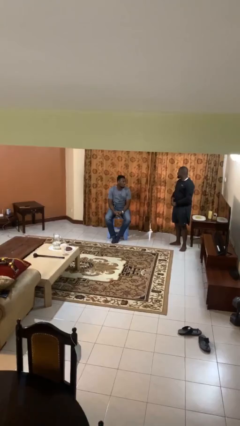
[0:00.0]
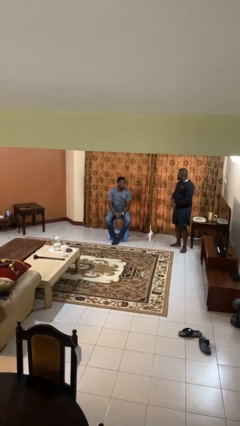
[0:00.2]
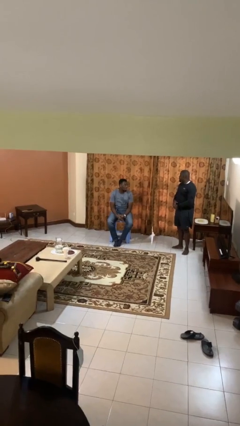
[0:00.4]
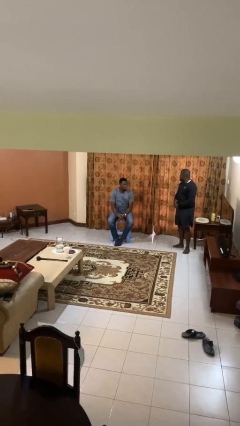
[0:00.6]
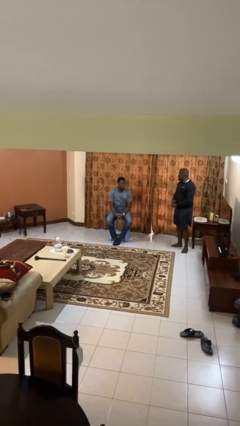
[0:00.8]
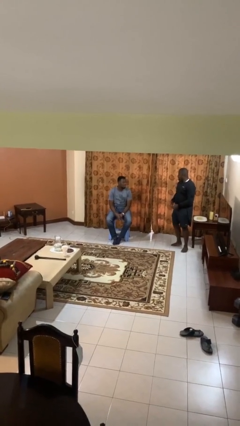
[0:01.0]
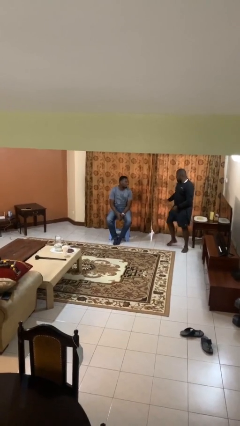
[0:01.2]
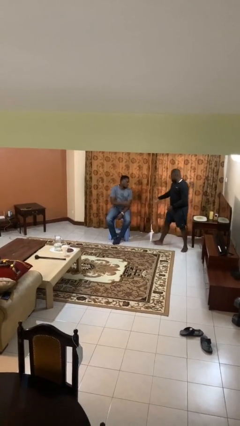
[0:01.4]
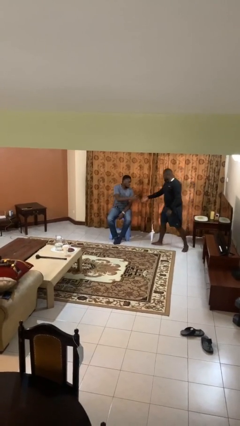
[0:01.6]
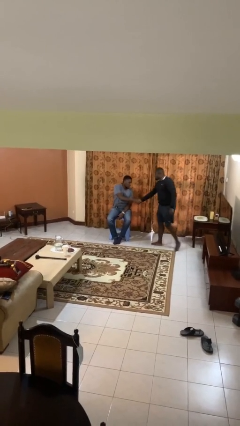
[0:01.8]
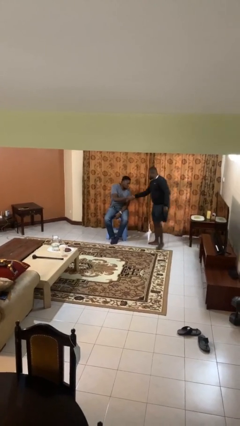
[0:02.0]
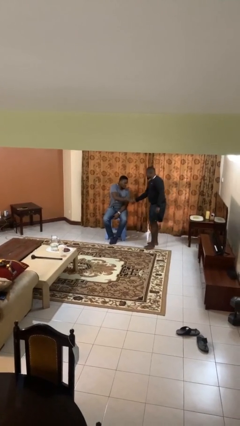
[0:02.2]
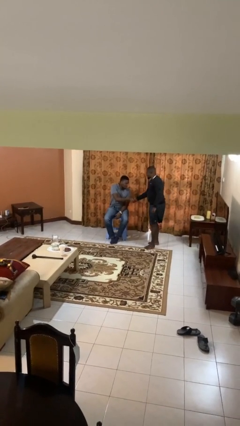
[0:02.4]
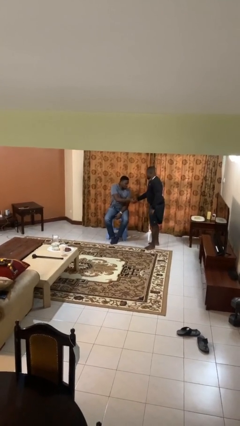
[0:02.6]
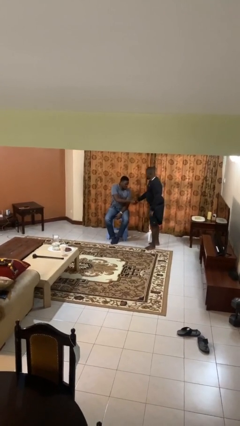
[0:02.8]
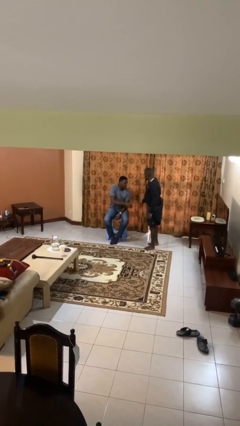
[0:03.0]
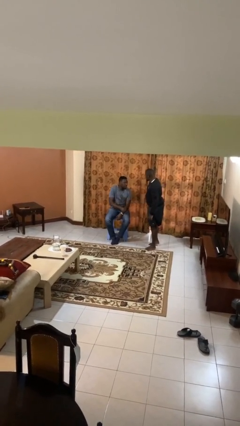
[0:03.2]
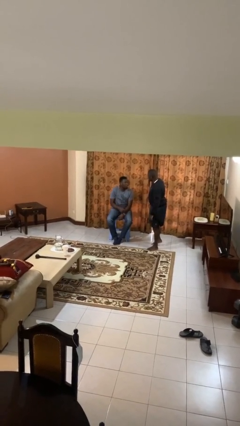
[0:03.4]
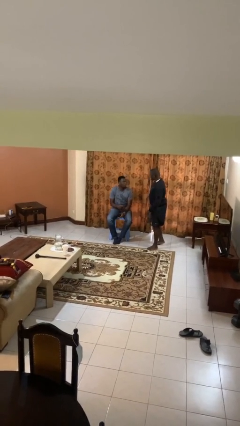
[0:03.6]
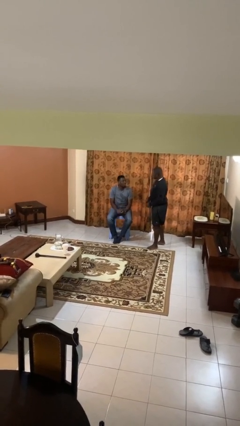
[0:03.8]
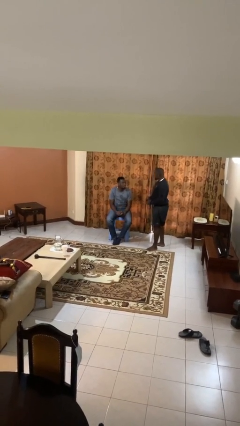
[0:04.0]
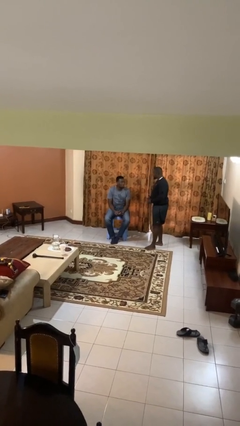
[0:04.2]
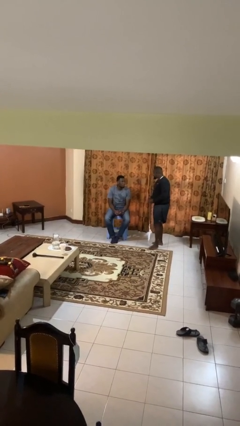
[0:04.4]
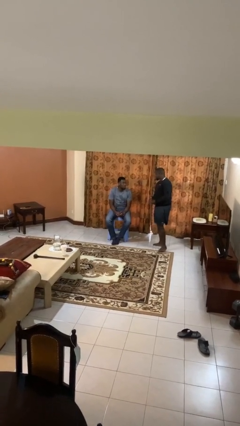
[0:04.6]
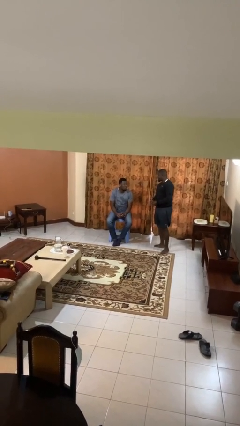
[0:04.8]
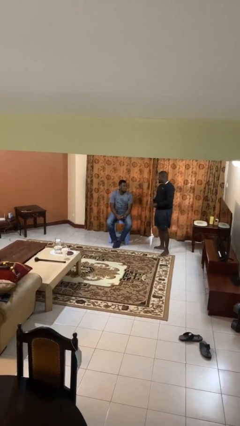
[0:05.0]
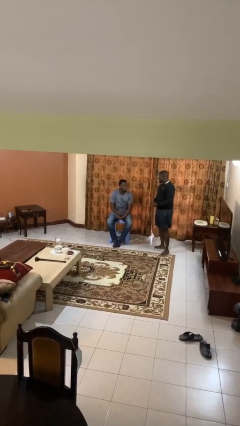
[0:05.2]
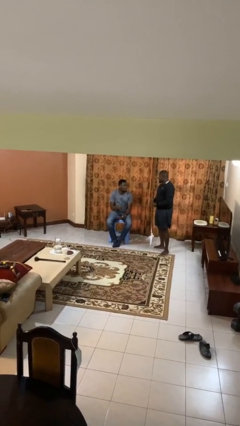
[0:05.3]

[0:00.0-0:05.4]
person shakes hand

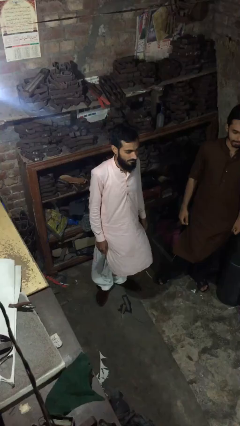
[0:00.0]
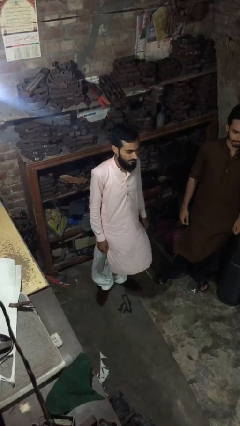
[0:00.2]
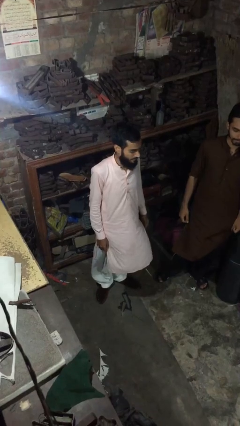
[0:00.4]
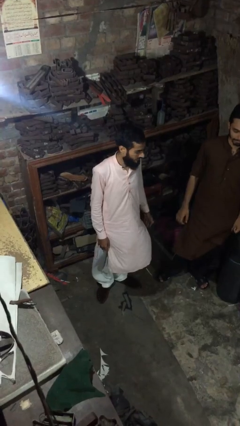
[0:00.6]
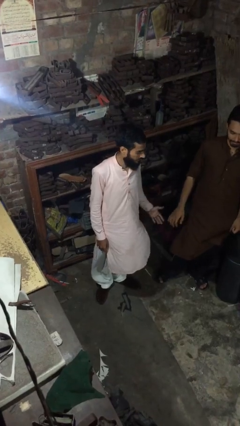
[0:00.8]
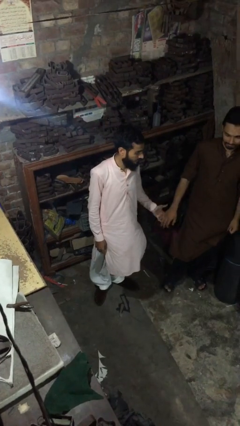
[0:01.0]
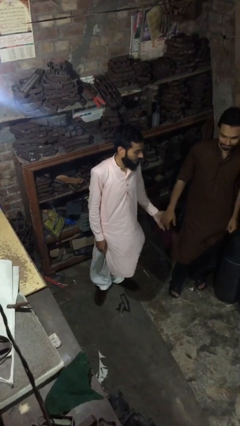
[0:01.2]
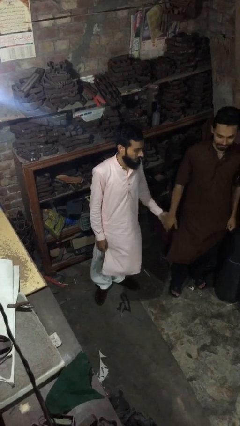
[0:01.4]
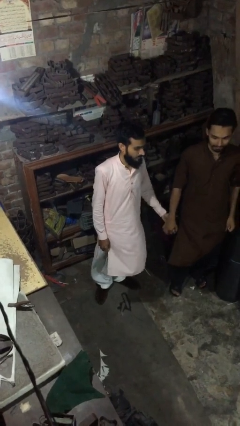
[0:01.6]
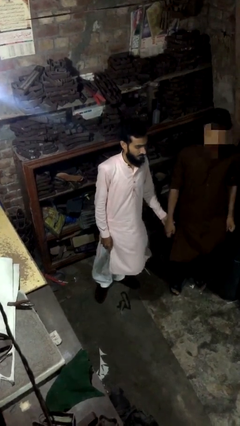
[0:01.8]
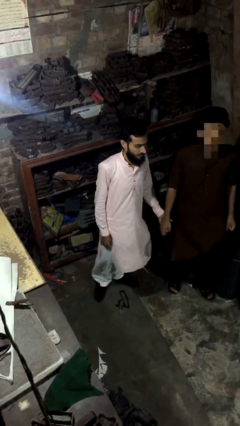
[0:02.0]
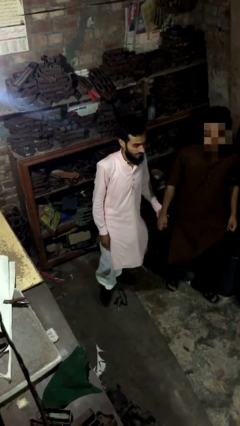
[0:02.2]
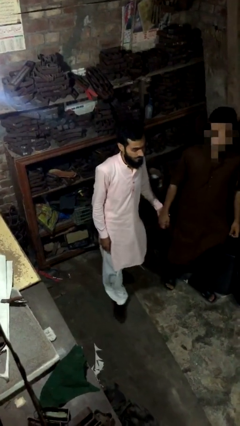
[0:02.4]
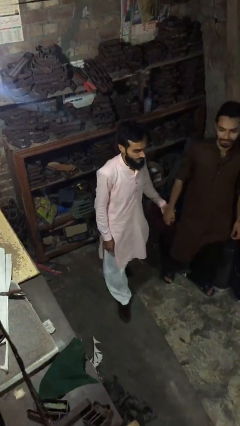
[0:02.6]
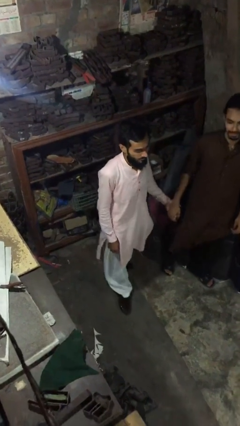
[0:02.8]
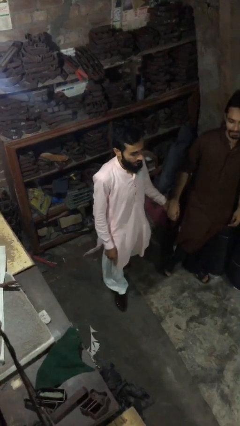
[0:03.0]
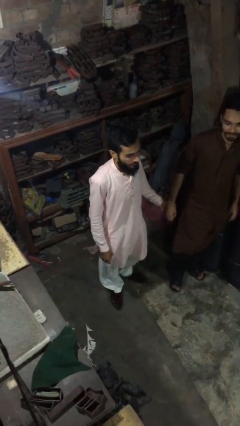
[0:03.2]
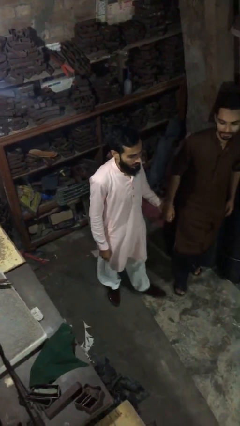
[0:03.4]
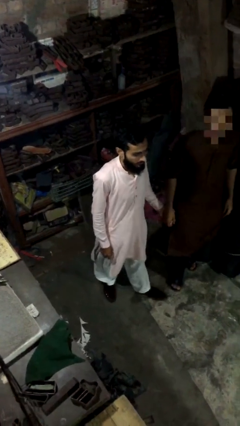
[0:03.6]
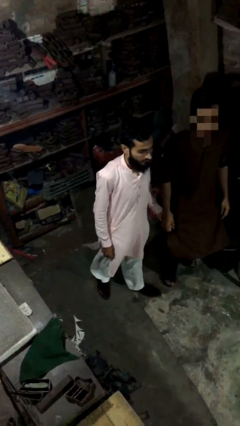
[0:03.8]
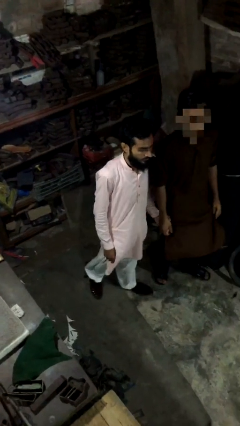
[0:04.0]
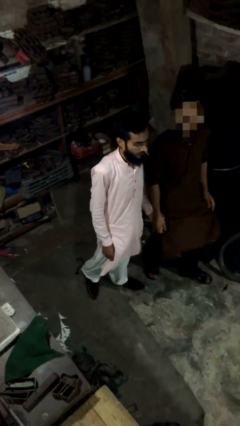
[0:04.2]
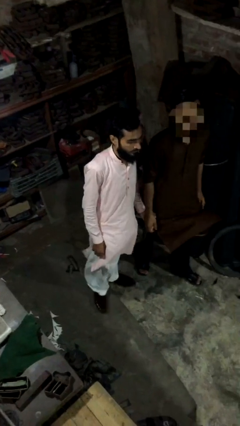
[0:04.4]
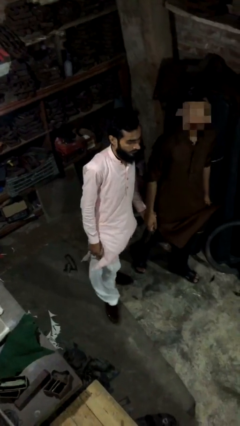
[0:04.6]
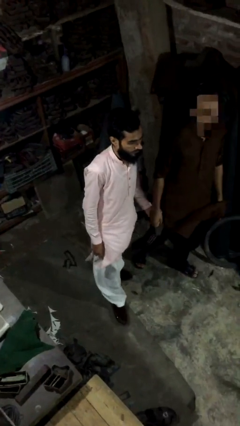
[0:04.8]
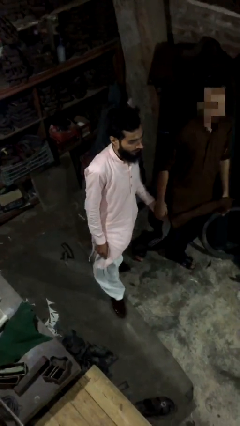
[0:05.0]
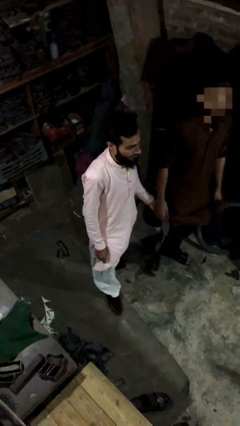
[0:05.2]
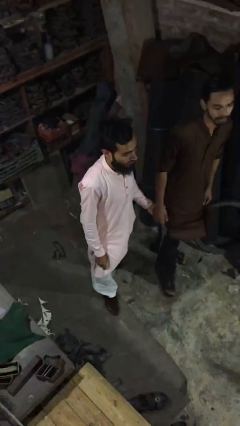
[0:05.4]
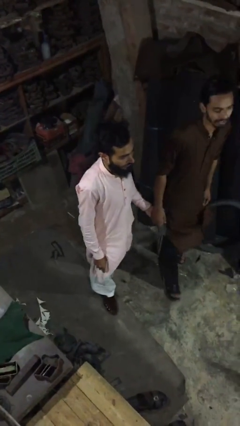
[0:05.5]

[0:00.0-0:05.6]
person holds hand

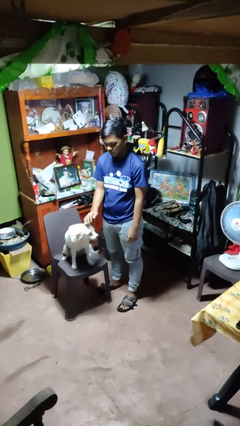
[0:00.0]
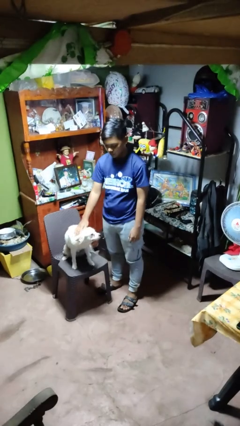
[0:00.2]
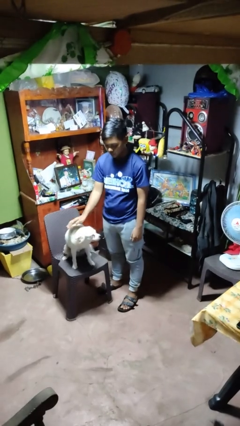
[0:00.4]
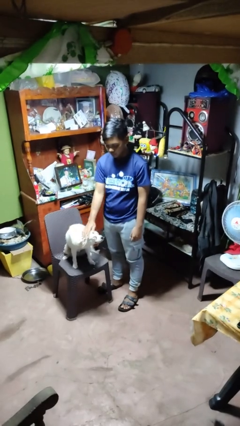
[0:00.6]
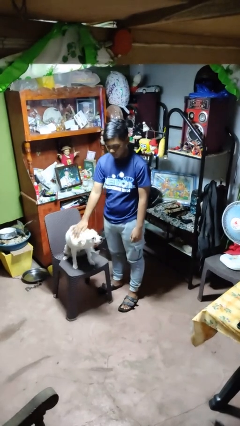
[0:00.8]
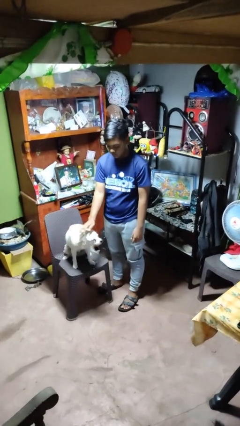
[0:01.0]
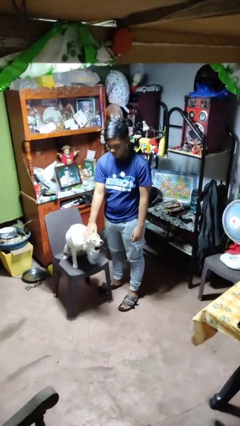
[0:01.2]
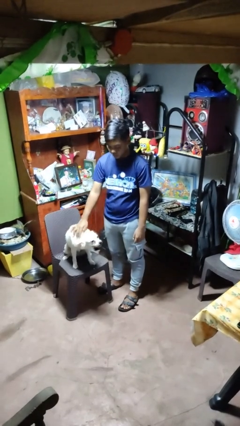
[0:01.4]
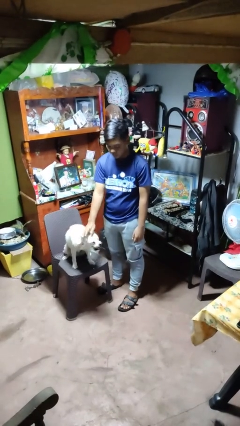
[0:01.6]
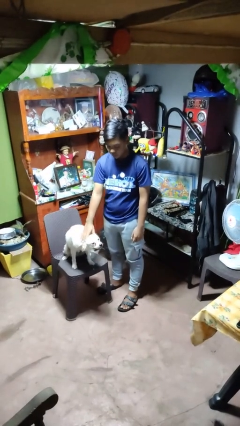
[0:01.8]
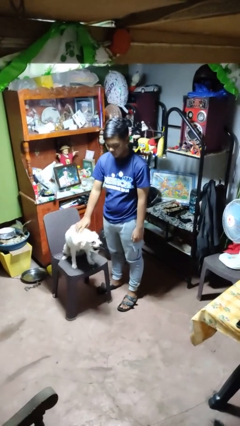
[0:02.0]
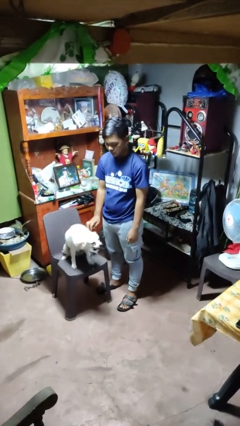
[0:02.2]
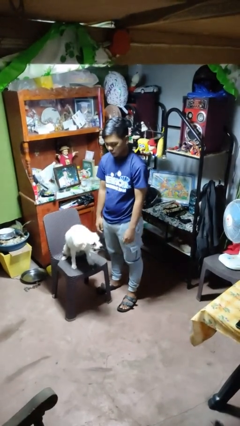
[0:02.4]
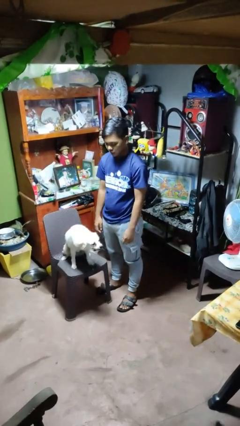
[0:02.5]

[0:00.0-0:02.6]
person pets dog

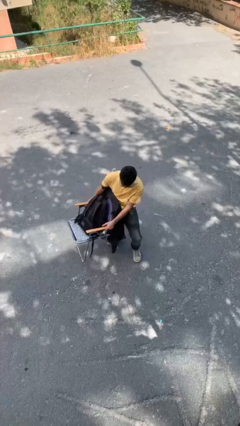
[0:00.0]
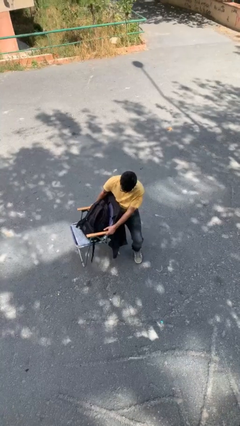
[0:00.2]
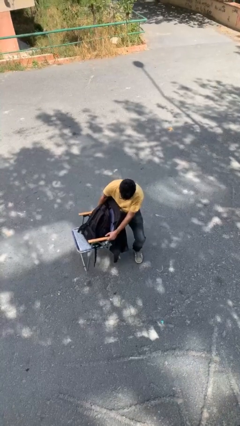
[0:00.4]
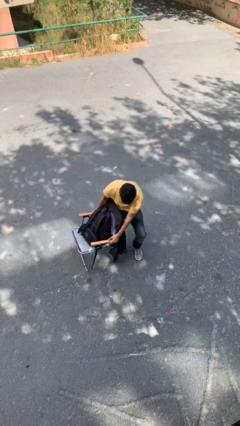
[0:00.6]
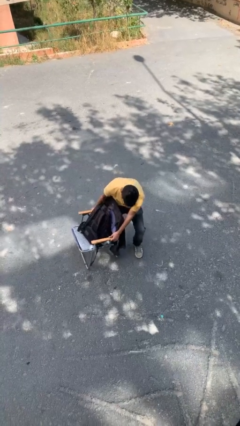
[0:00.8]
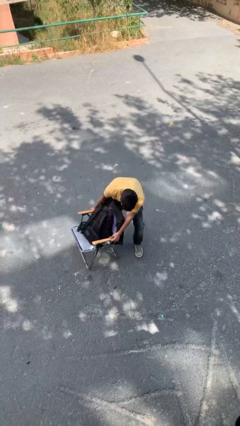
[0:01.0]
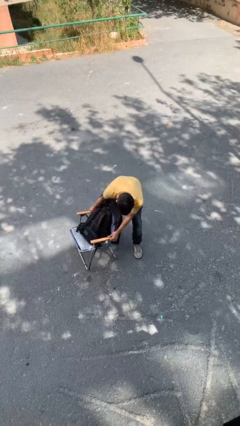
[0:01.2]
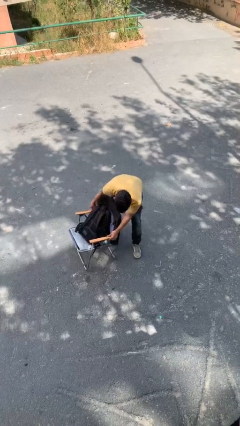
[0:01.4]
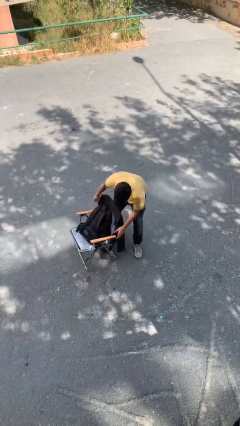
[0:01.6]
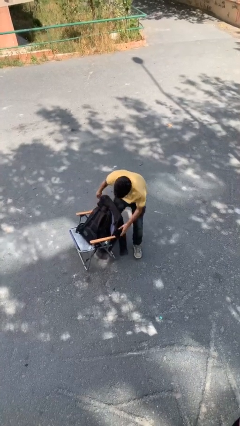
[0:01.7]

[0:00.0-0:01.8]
person puts down object on floor

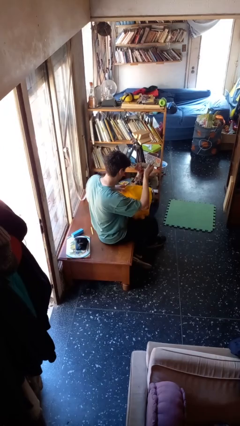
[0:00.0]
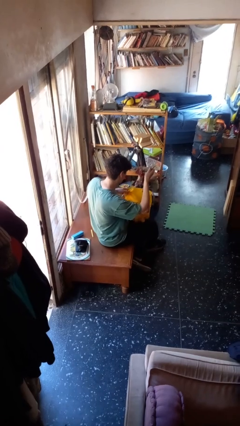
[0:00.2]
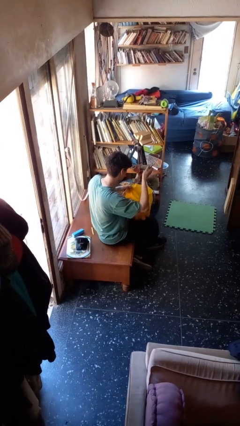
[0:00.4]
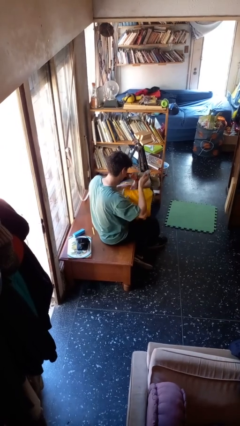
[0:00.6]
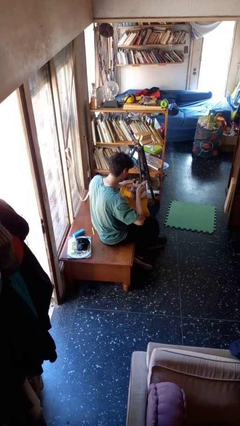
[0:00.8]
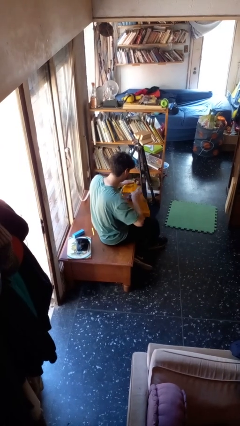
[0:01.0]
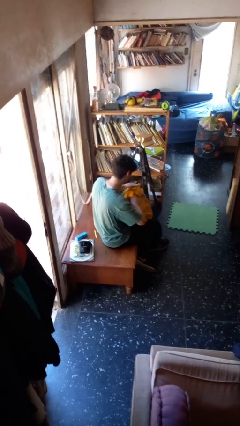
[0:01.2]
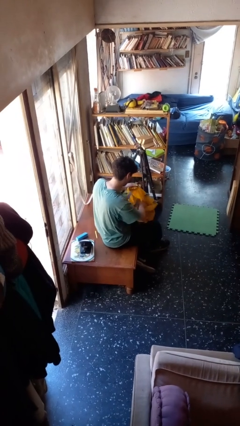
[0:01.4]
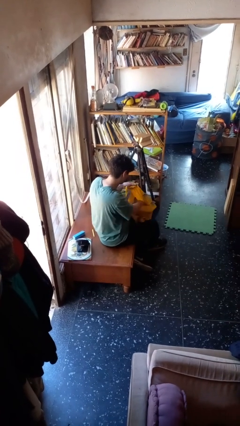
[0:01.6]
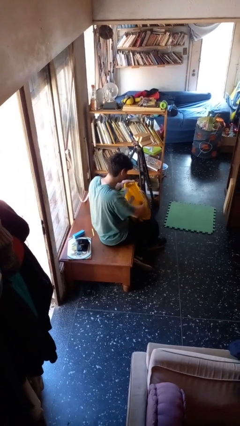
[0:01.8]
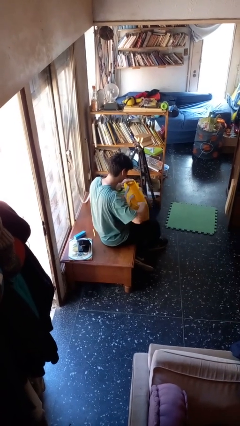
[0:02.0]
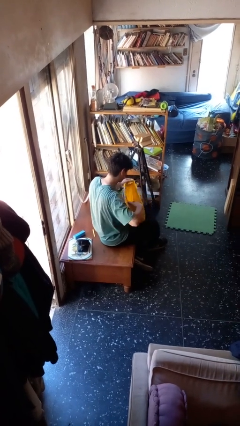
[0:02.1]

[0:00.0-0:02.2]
person puts object into bag
